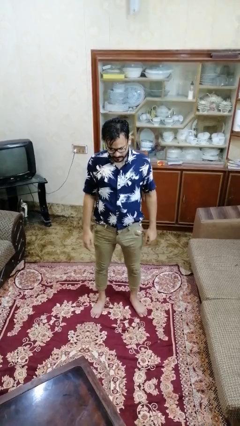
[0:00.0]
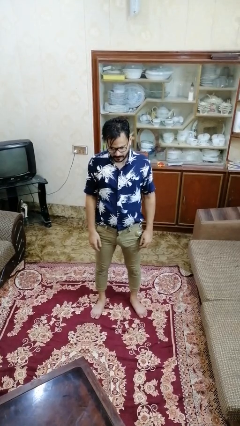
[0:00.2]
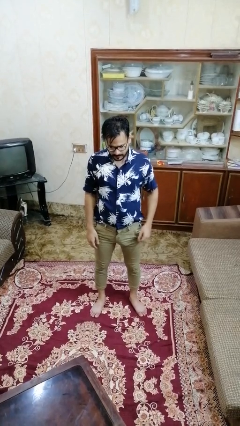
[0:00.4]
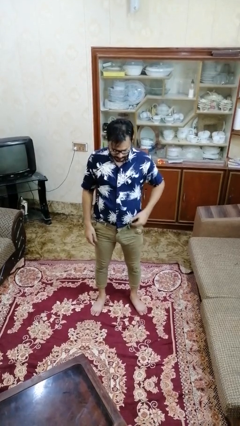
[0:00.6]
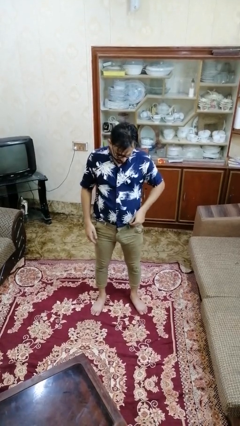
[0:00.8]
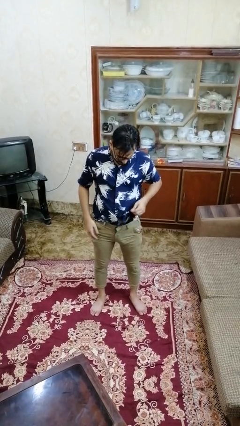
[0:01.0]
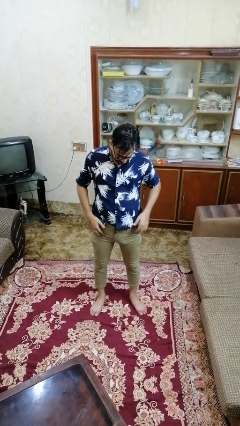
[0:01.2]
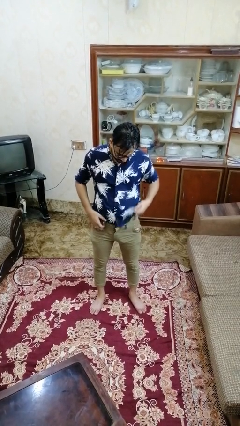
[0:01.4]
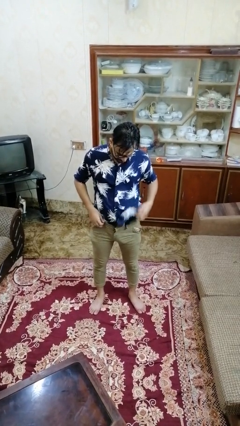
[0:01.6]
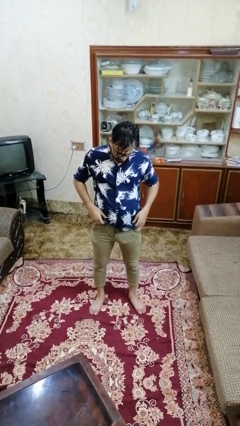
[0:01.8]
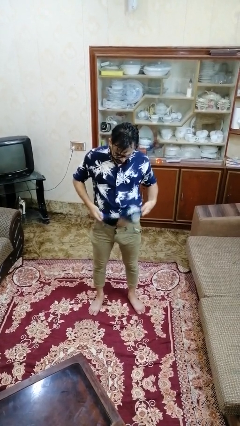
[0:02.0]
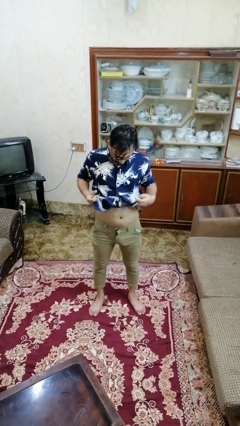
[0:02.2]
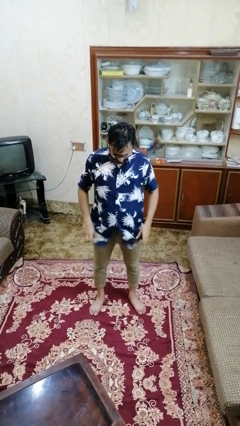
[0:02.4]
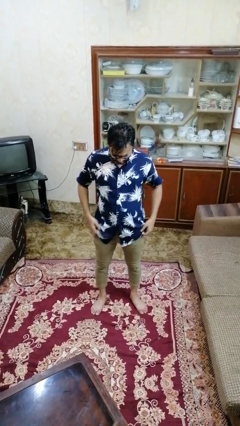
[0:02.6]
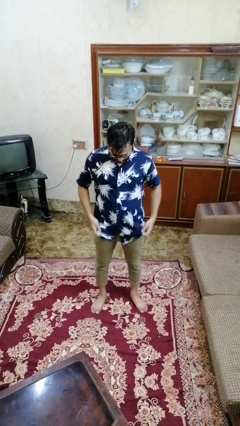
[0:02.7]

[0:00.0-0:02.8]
person untucks shirt

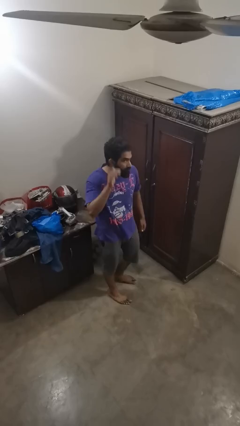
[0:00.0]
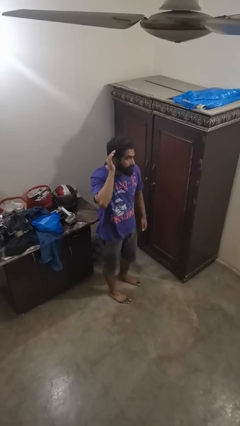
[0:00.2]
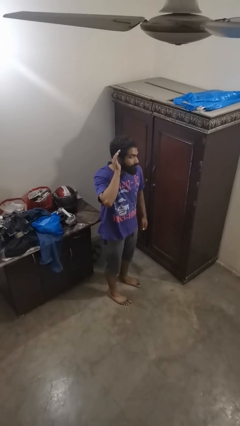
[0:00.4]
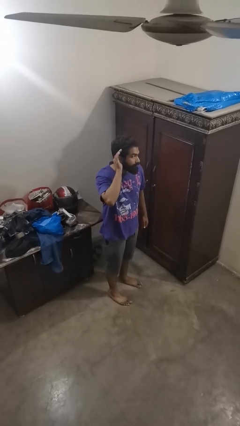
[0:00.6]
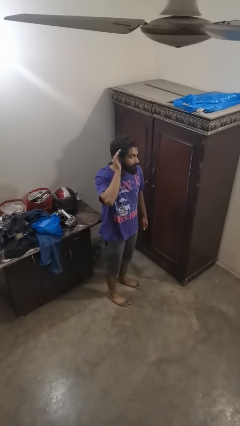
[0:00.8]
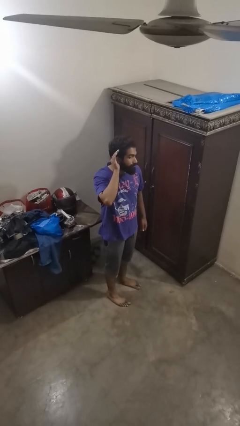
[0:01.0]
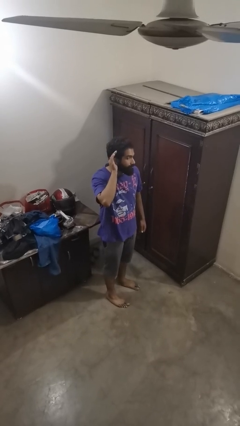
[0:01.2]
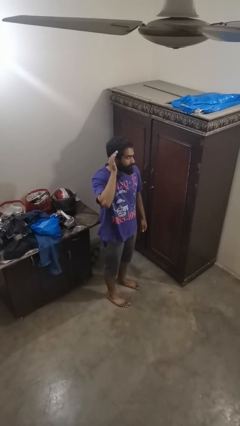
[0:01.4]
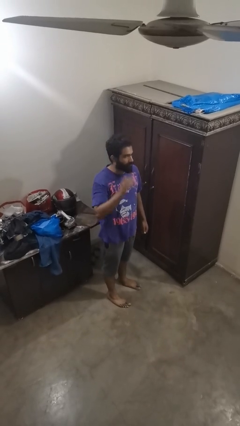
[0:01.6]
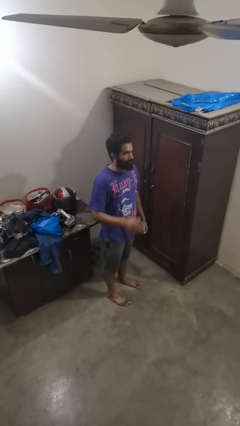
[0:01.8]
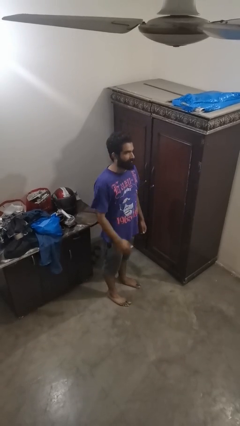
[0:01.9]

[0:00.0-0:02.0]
person gestures listen closely

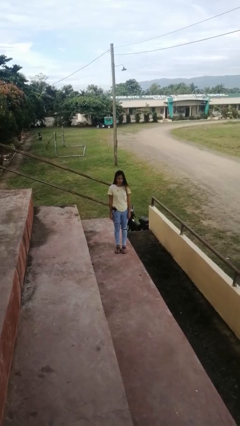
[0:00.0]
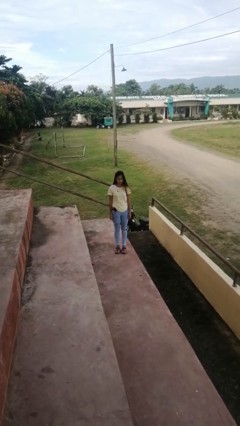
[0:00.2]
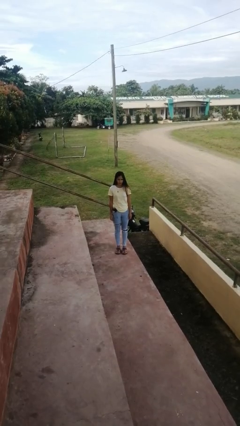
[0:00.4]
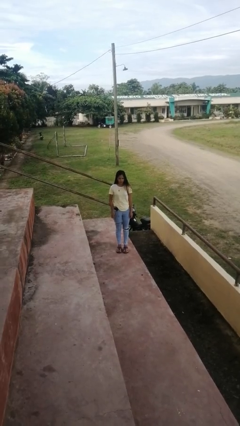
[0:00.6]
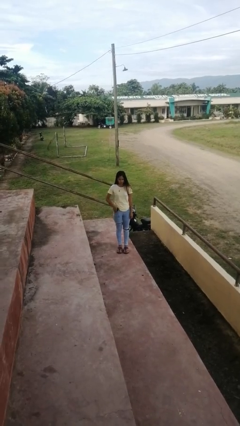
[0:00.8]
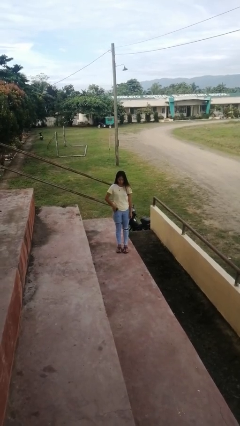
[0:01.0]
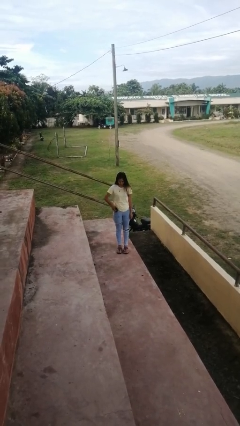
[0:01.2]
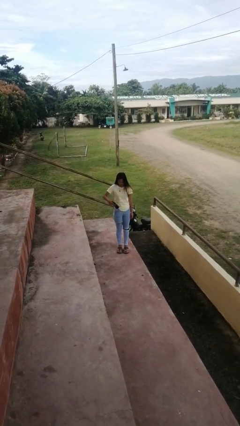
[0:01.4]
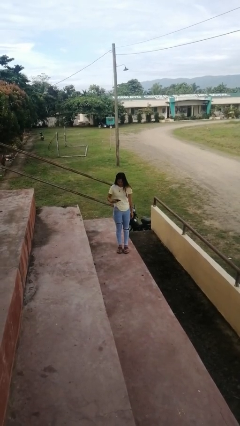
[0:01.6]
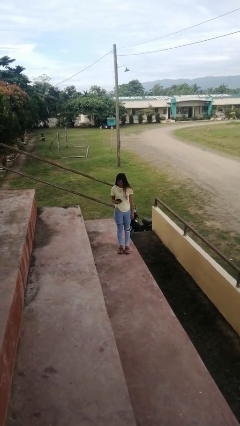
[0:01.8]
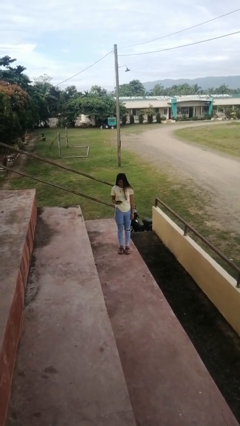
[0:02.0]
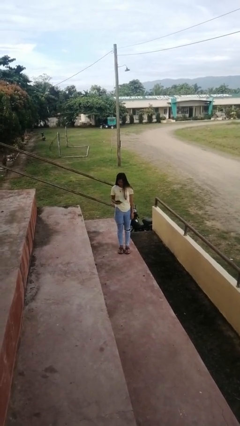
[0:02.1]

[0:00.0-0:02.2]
person takes phone from pocket

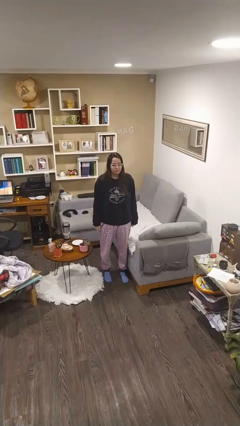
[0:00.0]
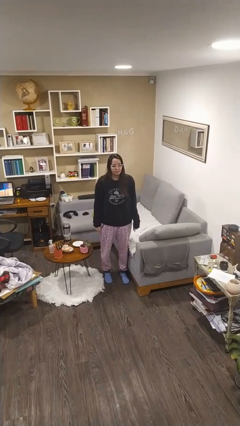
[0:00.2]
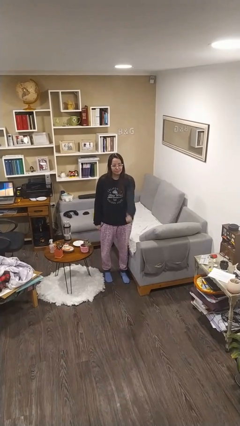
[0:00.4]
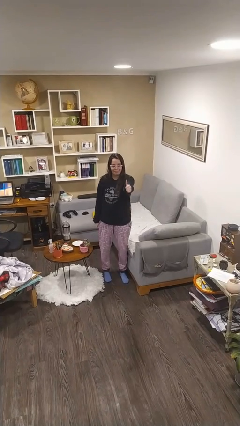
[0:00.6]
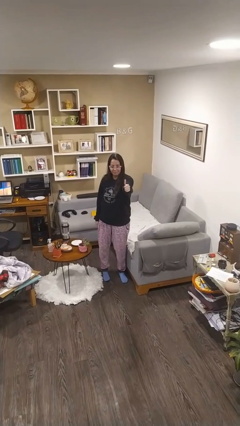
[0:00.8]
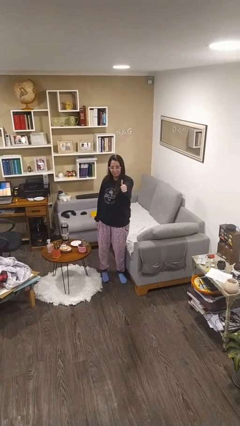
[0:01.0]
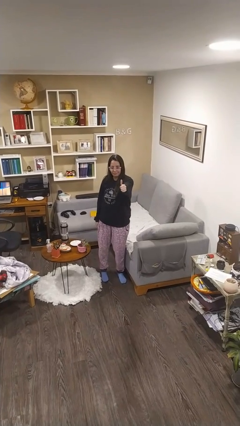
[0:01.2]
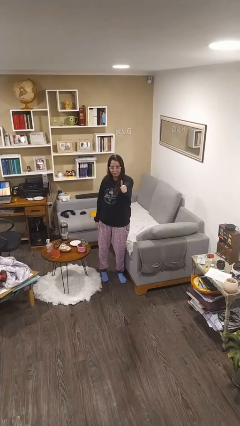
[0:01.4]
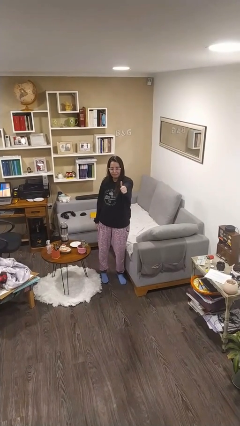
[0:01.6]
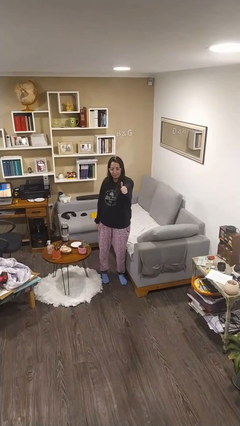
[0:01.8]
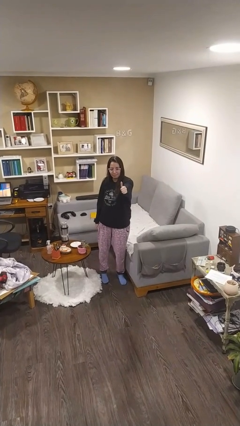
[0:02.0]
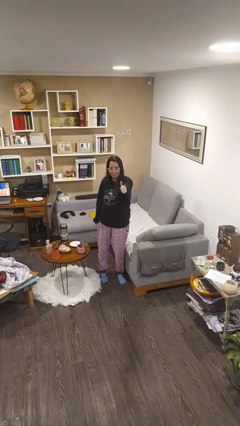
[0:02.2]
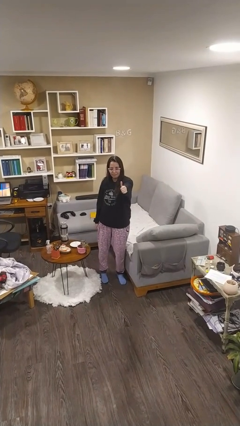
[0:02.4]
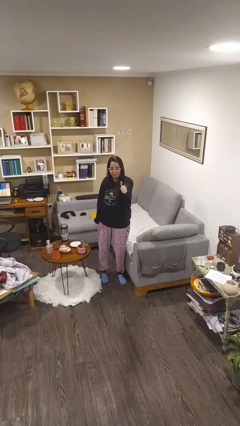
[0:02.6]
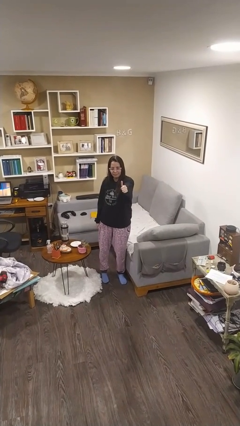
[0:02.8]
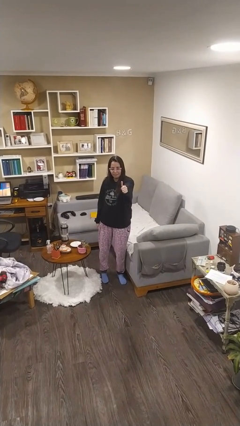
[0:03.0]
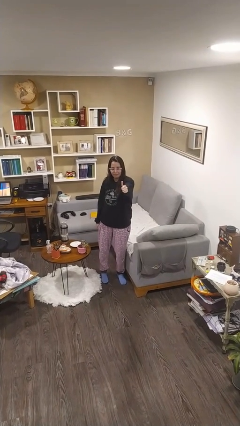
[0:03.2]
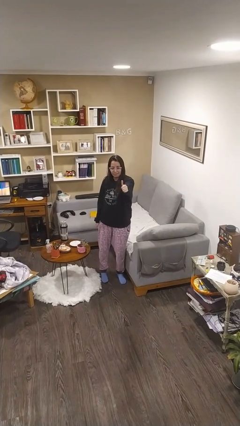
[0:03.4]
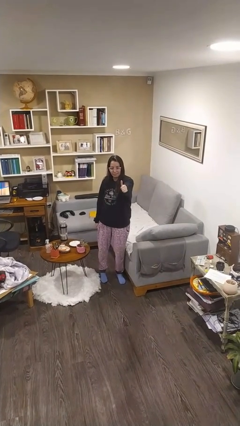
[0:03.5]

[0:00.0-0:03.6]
person gestures thumbs up

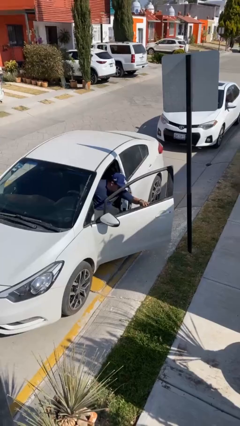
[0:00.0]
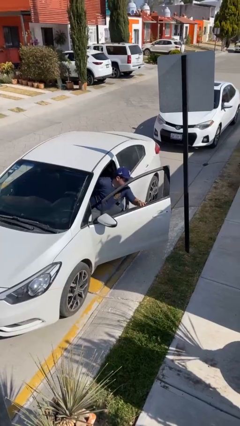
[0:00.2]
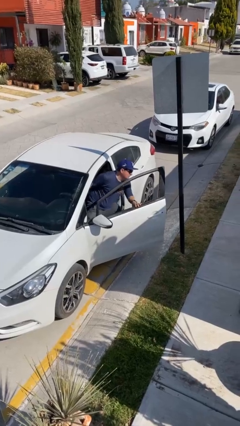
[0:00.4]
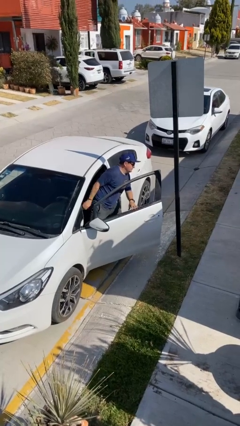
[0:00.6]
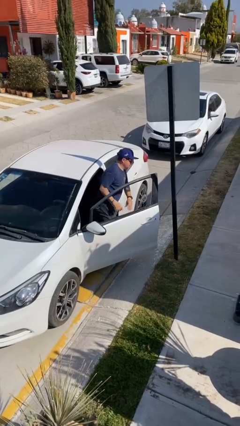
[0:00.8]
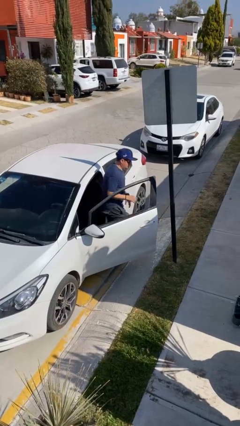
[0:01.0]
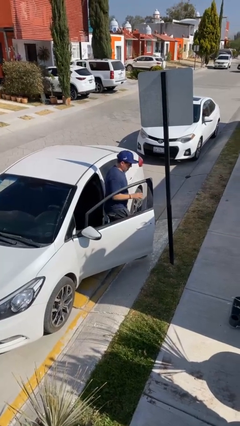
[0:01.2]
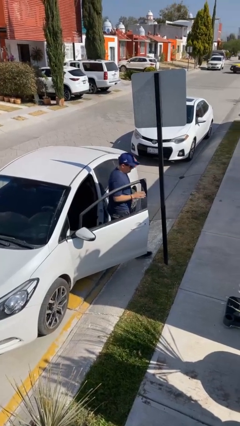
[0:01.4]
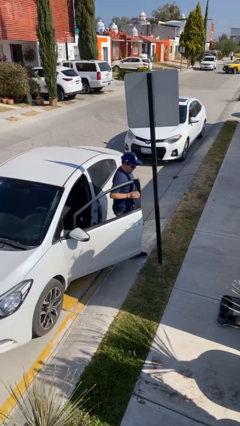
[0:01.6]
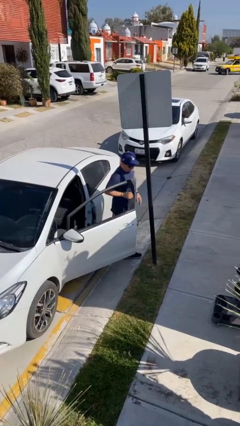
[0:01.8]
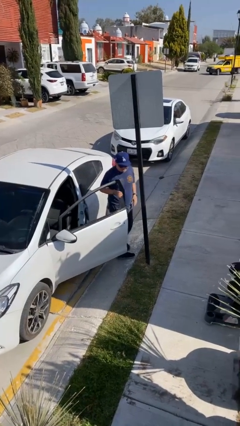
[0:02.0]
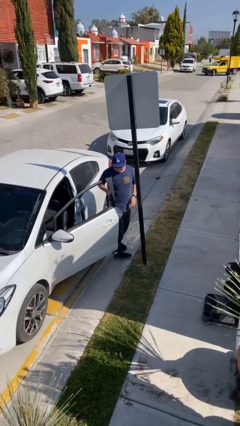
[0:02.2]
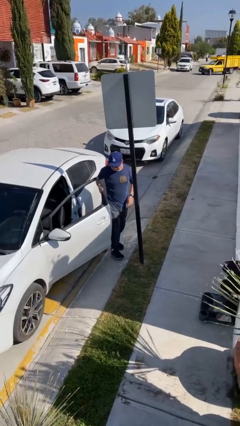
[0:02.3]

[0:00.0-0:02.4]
person exits car

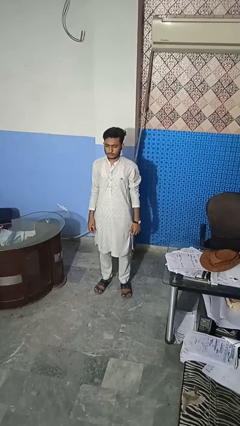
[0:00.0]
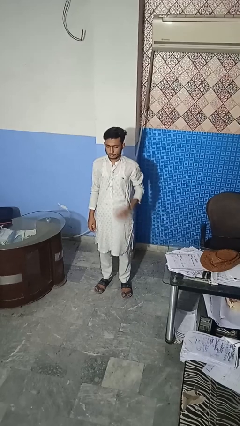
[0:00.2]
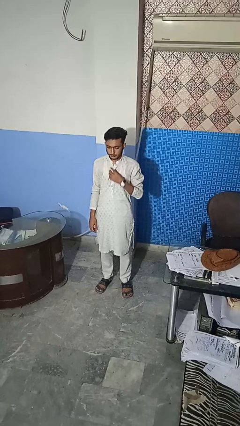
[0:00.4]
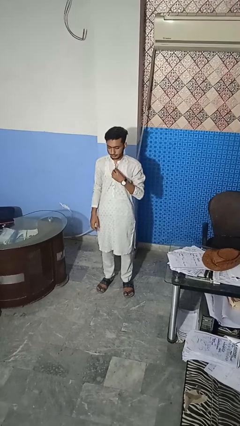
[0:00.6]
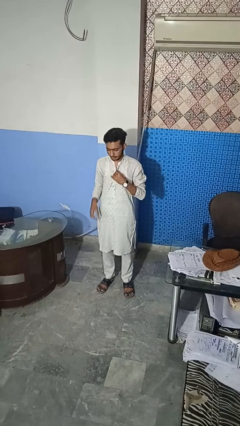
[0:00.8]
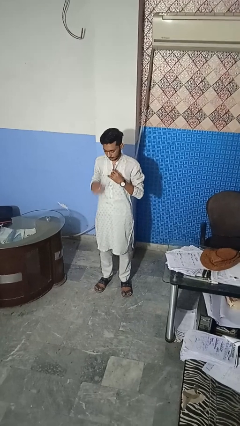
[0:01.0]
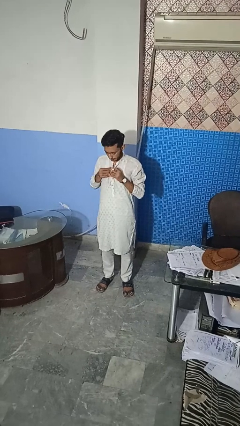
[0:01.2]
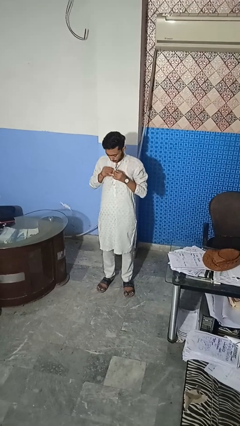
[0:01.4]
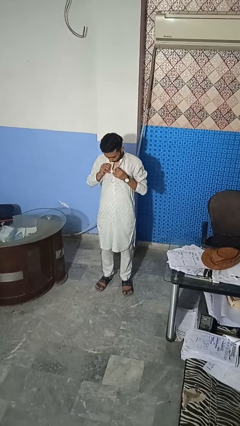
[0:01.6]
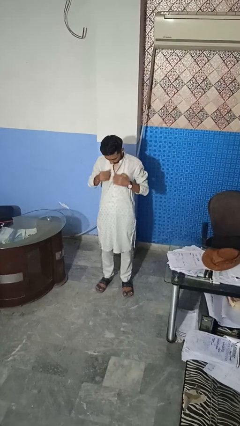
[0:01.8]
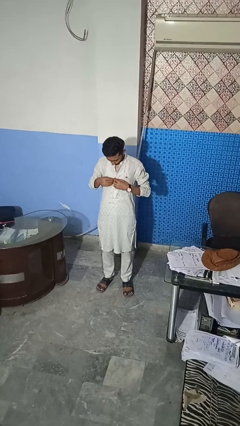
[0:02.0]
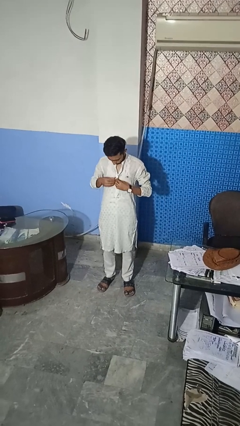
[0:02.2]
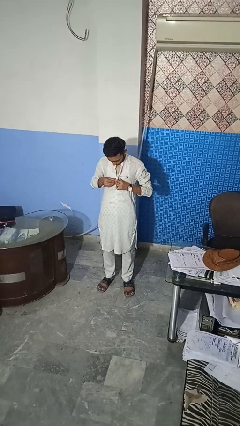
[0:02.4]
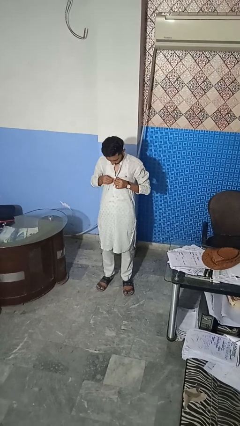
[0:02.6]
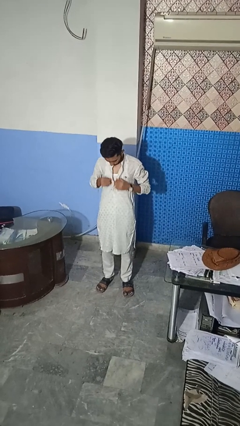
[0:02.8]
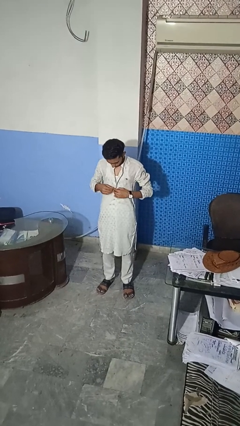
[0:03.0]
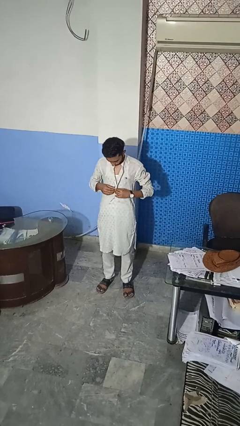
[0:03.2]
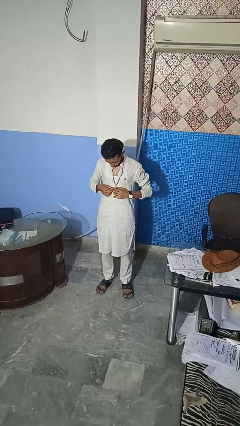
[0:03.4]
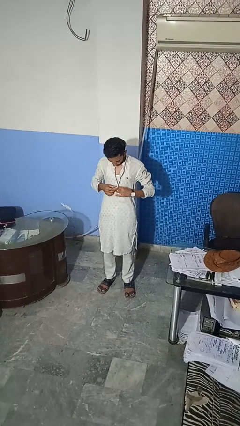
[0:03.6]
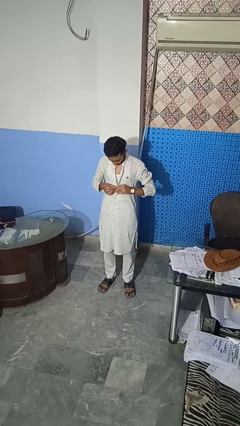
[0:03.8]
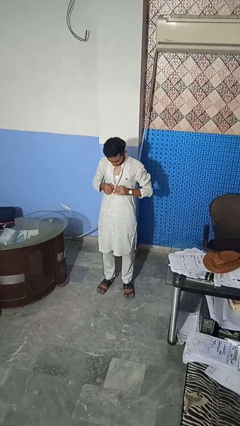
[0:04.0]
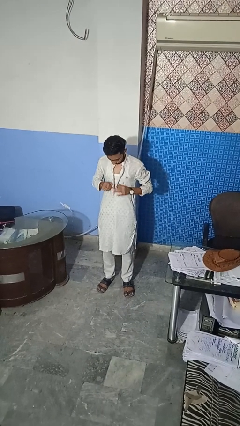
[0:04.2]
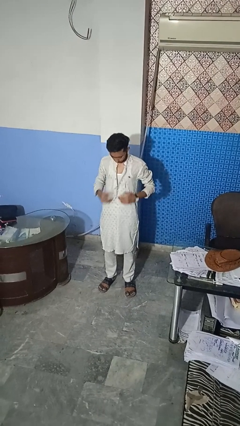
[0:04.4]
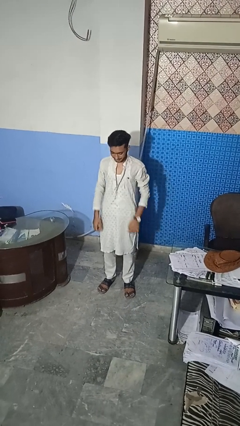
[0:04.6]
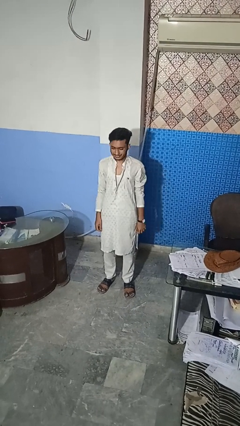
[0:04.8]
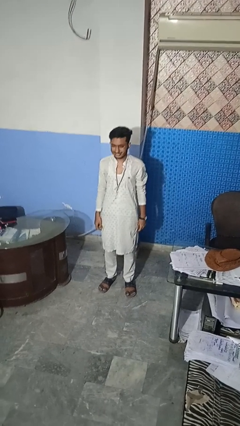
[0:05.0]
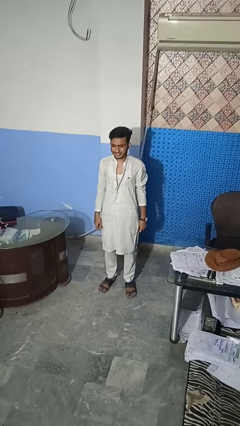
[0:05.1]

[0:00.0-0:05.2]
person unbuttons shirt
